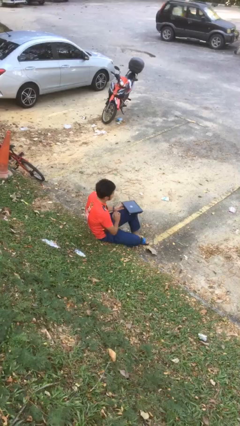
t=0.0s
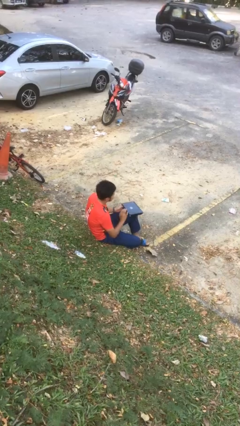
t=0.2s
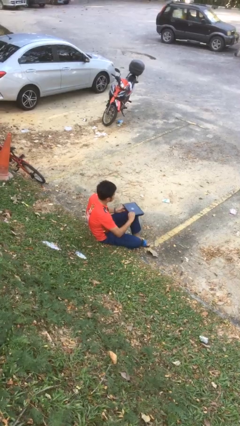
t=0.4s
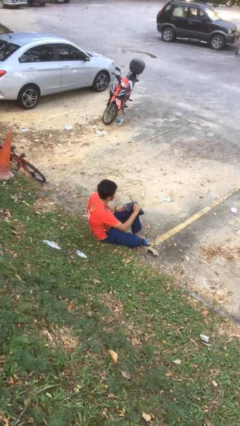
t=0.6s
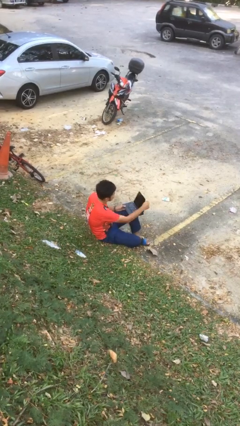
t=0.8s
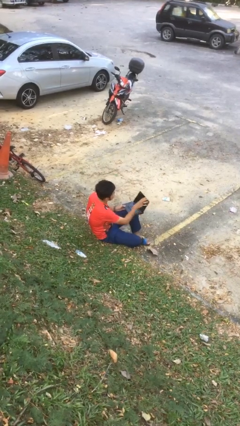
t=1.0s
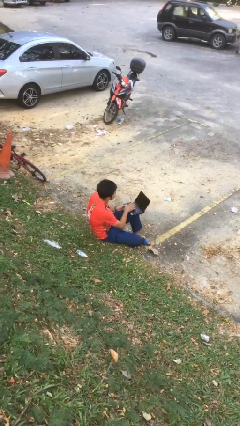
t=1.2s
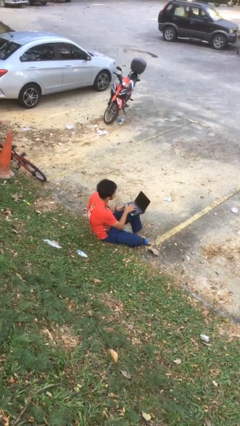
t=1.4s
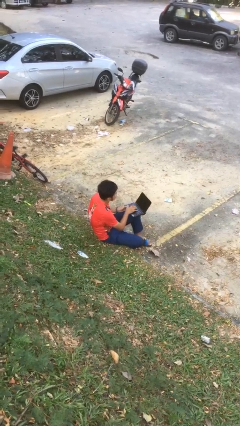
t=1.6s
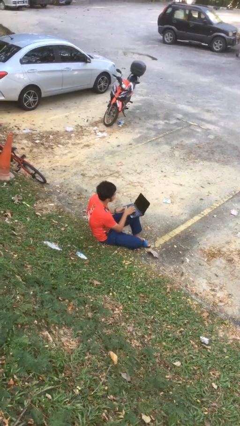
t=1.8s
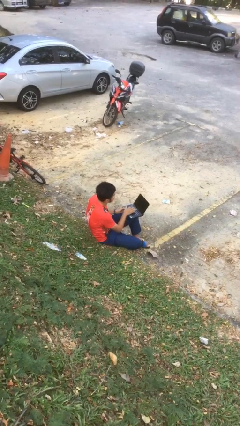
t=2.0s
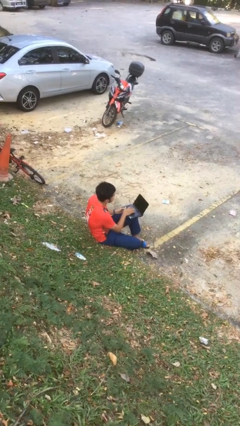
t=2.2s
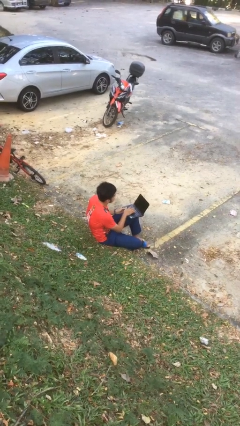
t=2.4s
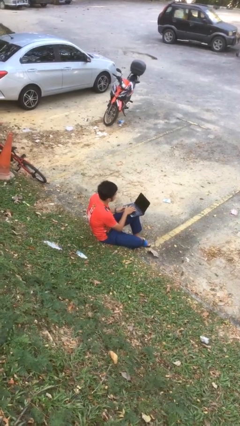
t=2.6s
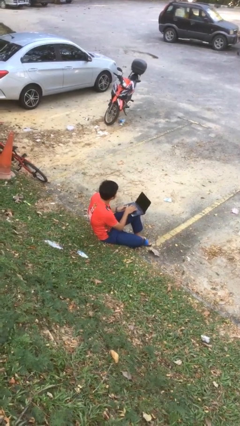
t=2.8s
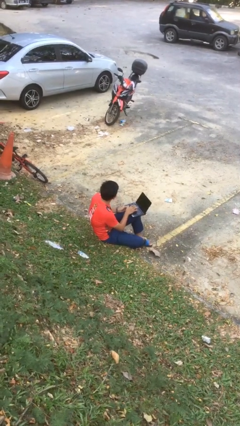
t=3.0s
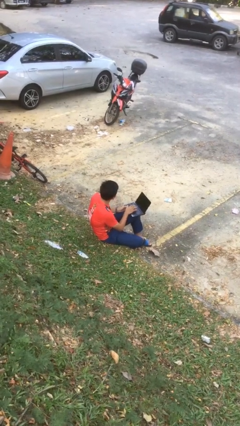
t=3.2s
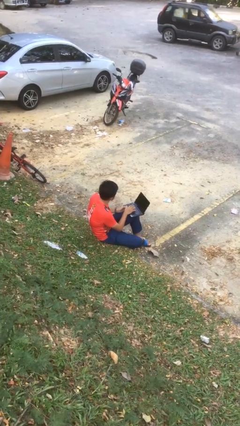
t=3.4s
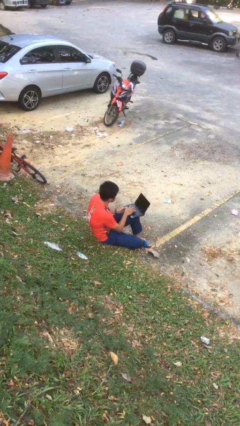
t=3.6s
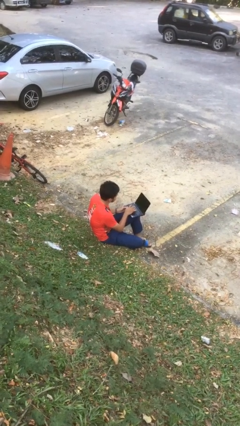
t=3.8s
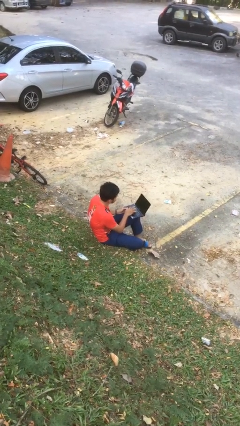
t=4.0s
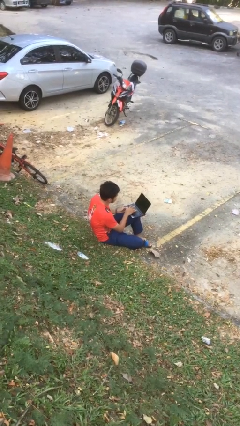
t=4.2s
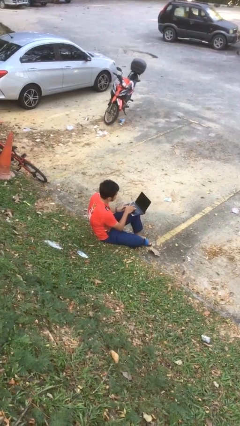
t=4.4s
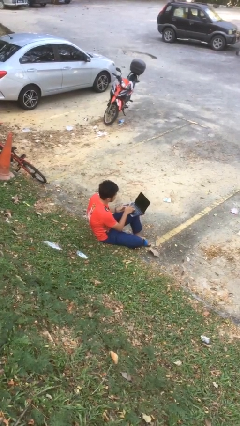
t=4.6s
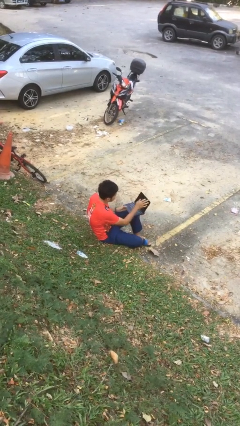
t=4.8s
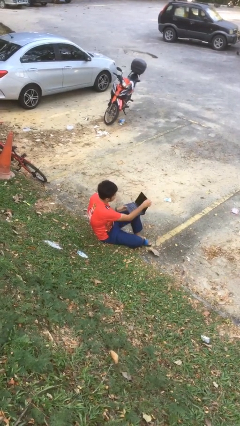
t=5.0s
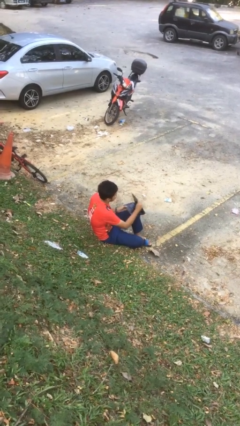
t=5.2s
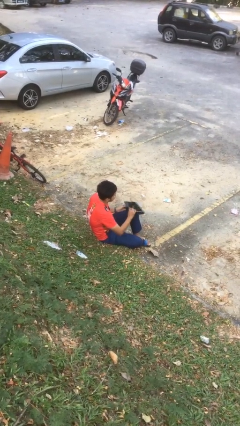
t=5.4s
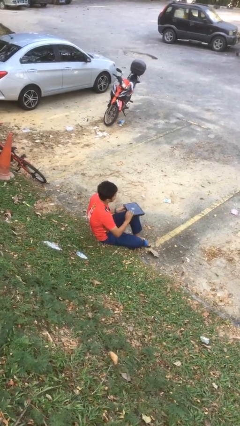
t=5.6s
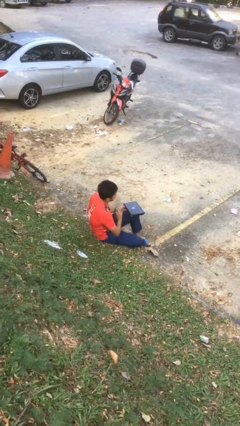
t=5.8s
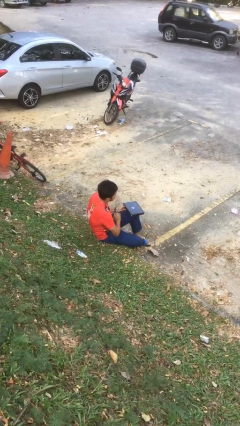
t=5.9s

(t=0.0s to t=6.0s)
person interacts with laptop

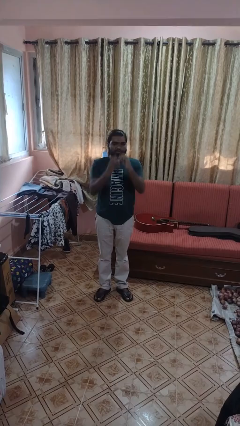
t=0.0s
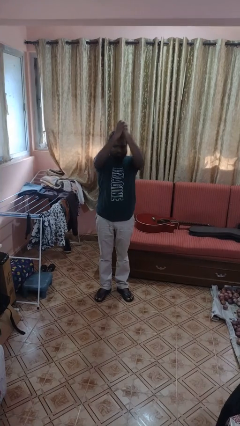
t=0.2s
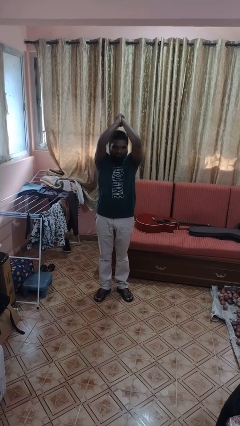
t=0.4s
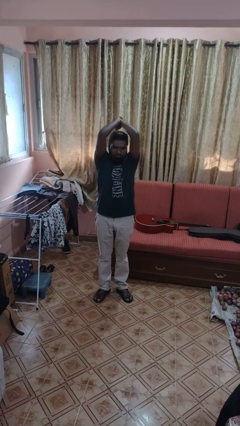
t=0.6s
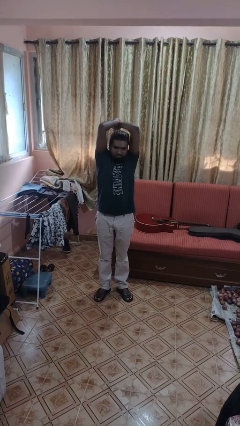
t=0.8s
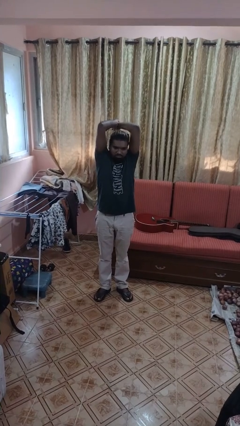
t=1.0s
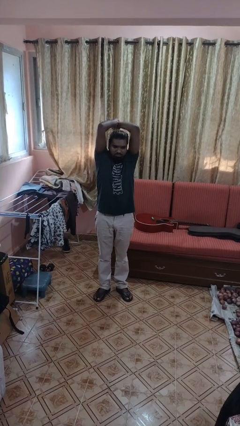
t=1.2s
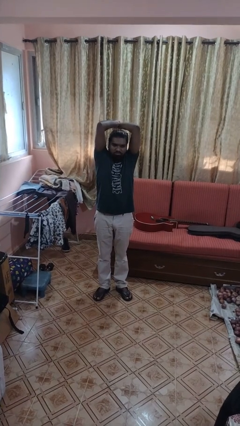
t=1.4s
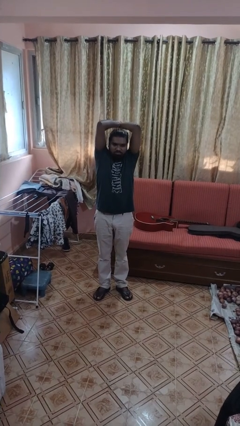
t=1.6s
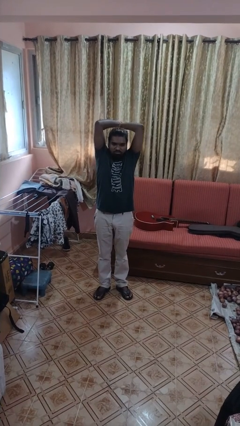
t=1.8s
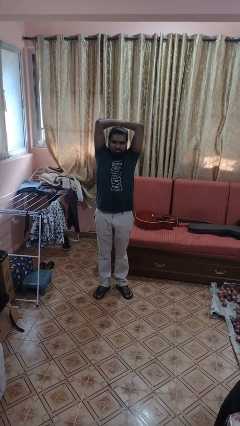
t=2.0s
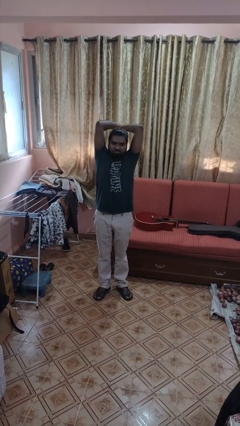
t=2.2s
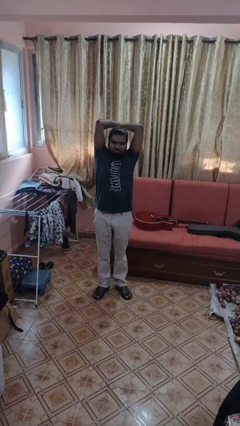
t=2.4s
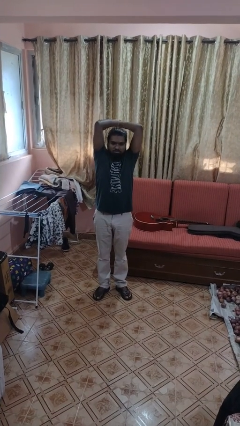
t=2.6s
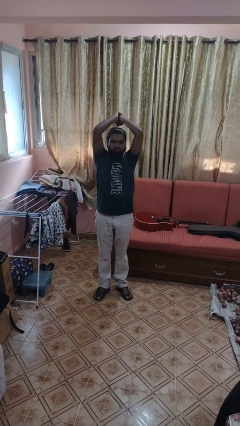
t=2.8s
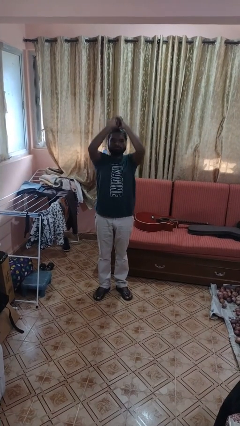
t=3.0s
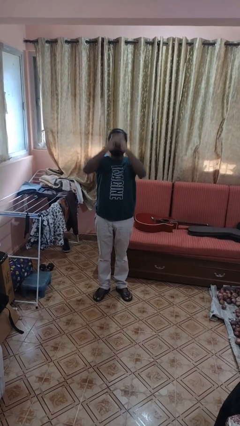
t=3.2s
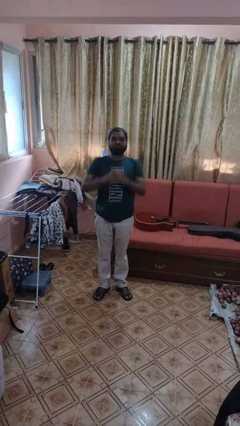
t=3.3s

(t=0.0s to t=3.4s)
person stretches arms over head

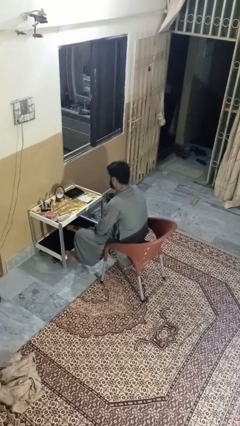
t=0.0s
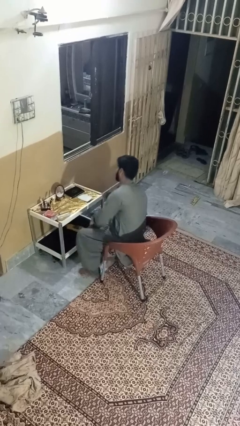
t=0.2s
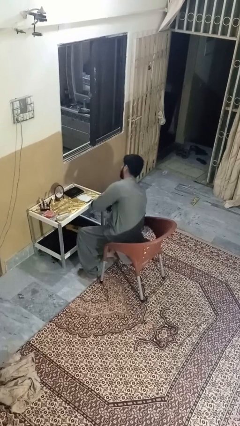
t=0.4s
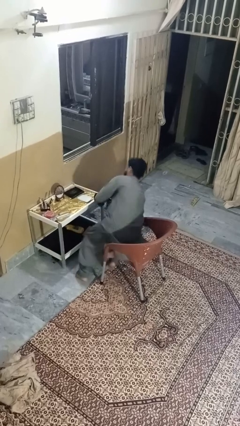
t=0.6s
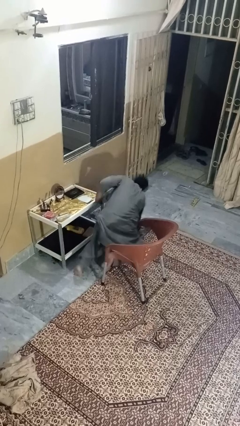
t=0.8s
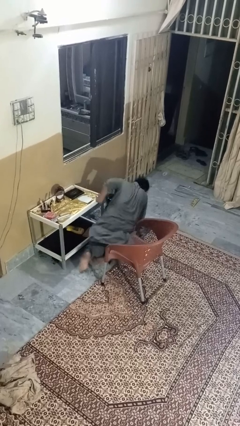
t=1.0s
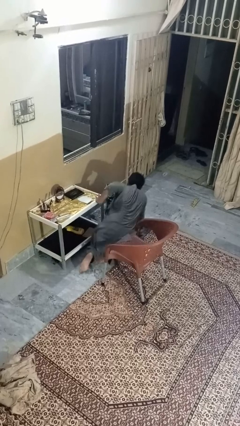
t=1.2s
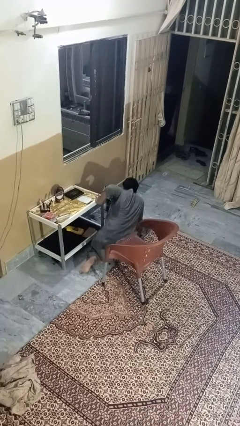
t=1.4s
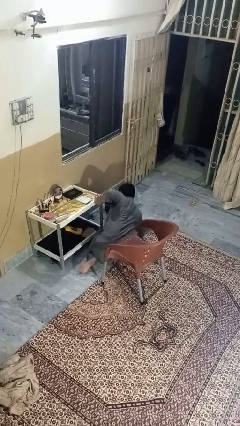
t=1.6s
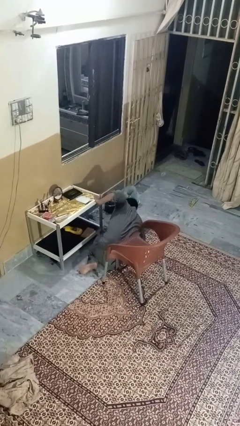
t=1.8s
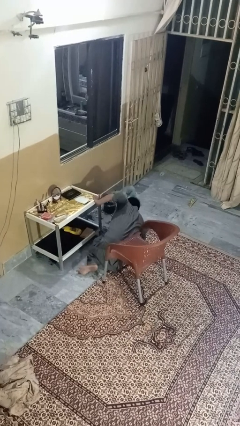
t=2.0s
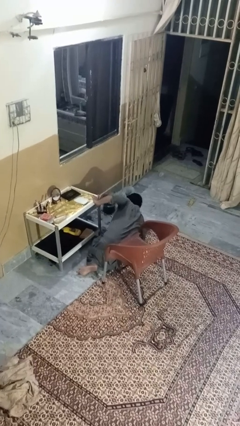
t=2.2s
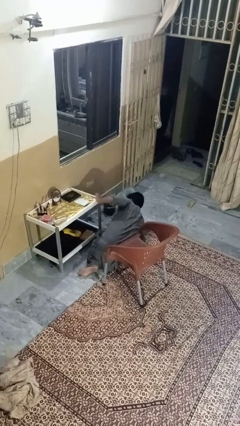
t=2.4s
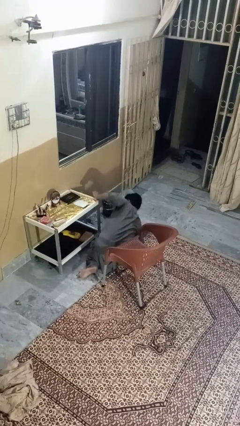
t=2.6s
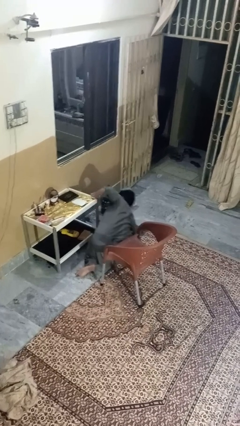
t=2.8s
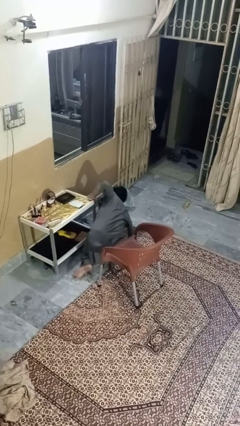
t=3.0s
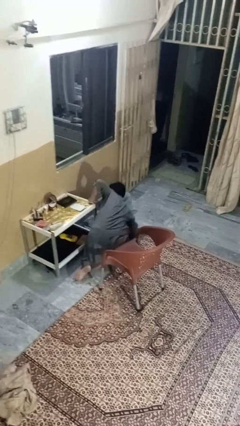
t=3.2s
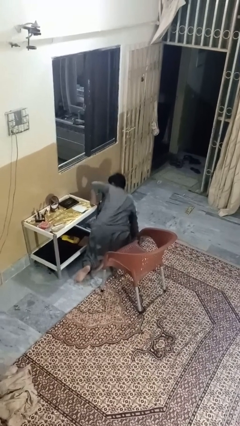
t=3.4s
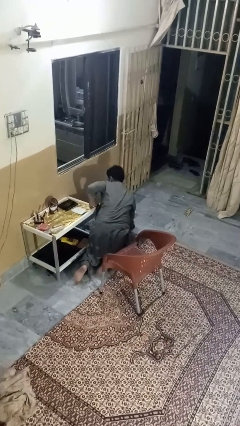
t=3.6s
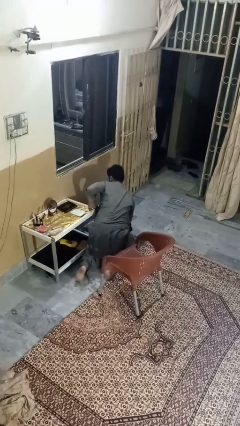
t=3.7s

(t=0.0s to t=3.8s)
person falls from chair

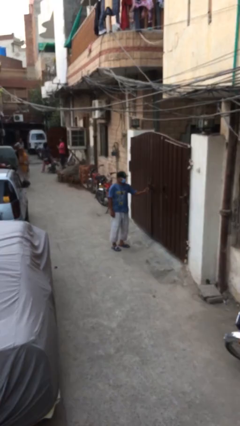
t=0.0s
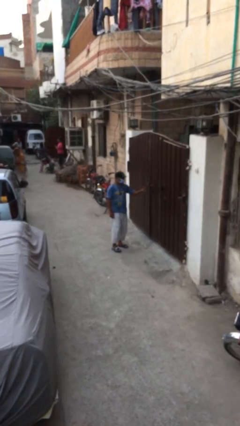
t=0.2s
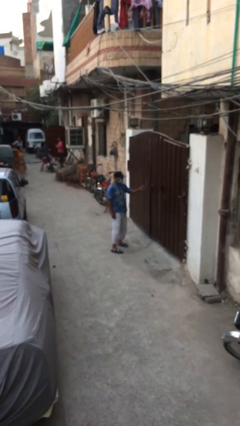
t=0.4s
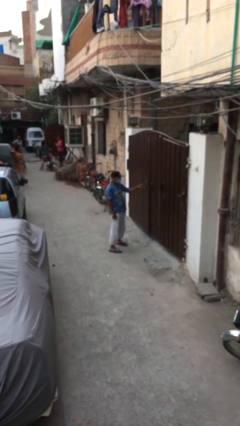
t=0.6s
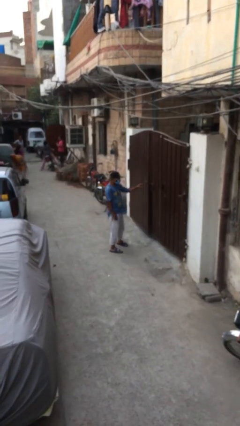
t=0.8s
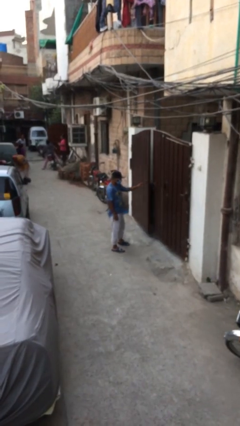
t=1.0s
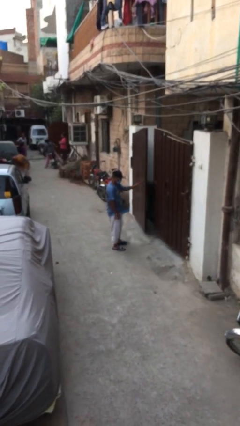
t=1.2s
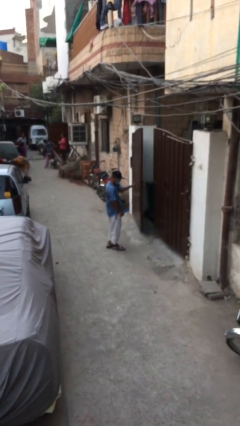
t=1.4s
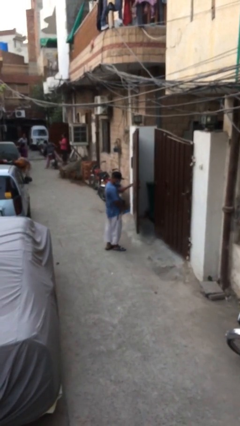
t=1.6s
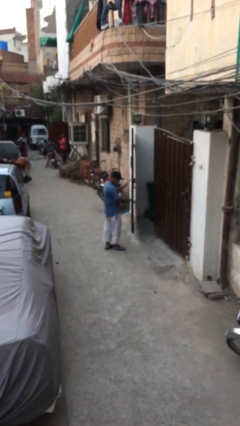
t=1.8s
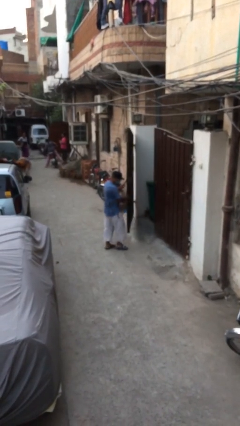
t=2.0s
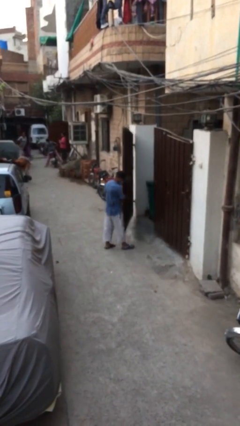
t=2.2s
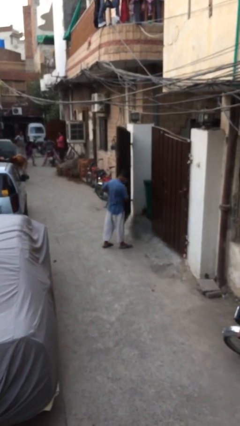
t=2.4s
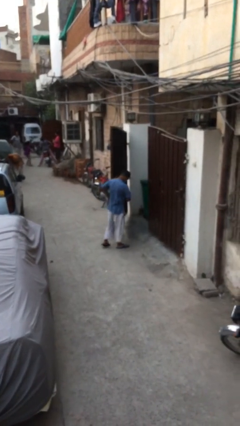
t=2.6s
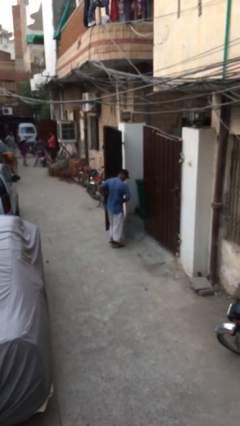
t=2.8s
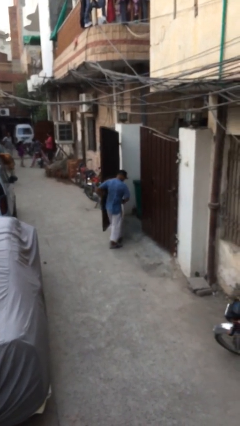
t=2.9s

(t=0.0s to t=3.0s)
person opens facility door

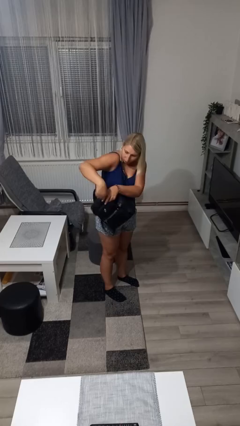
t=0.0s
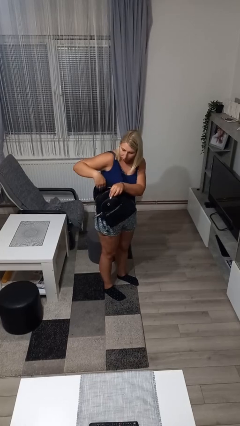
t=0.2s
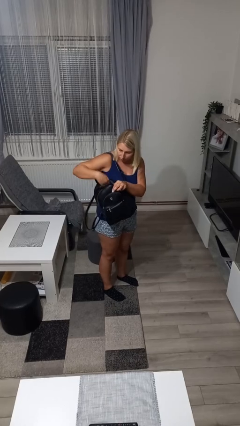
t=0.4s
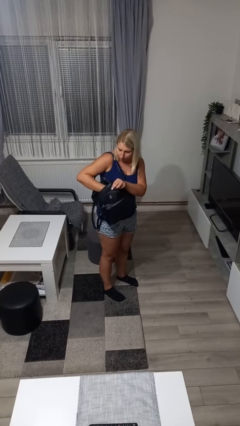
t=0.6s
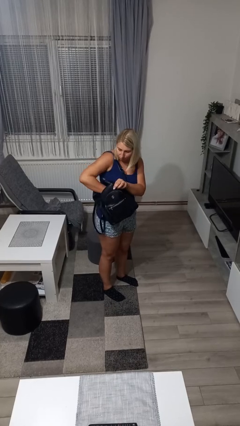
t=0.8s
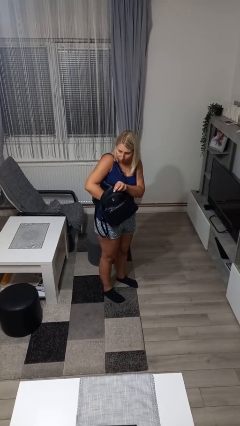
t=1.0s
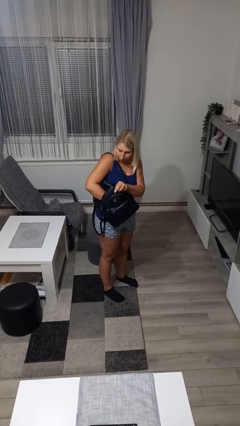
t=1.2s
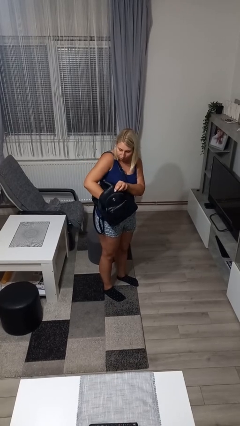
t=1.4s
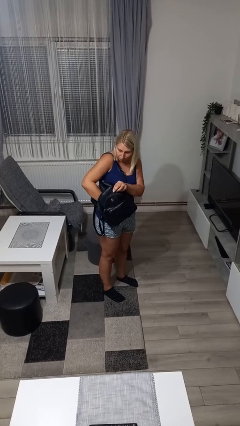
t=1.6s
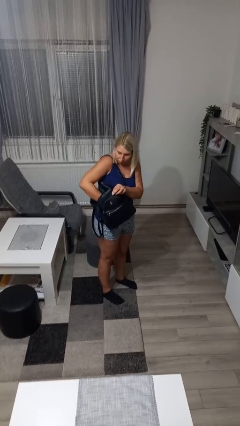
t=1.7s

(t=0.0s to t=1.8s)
person searches in backpack
